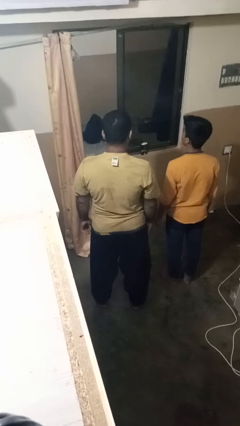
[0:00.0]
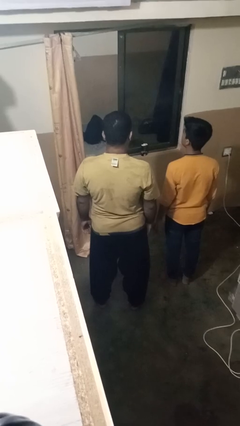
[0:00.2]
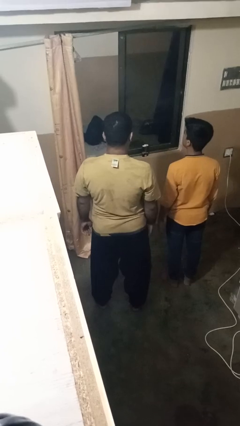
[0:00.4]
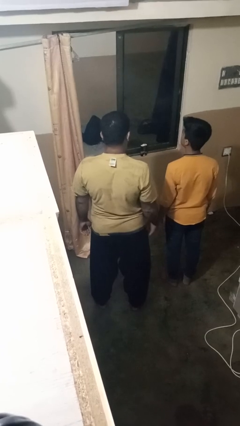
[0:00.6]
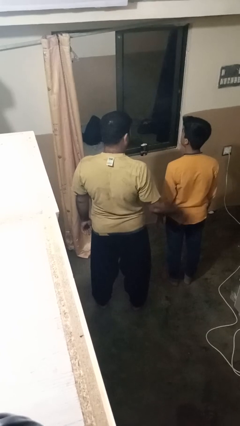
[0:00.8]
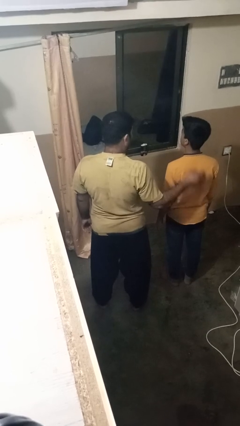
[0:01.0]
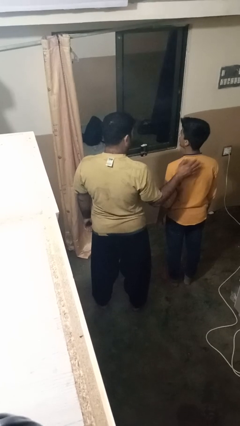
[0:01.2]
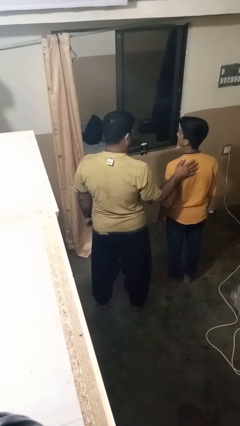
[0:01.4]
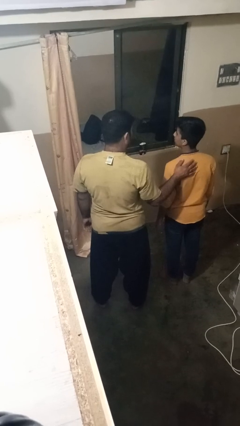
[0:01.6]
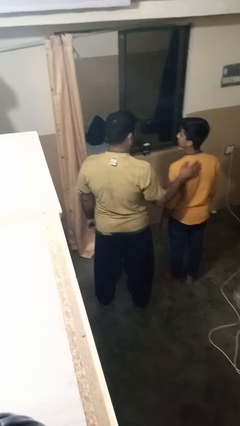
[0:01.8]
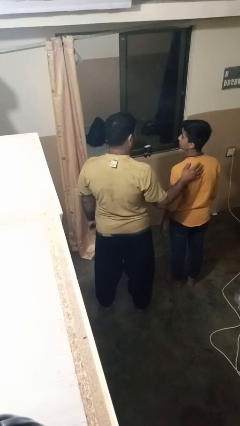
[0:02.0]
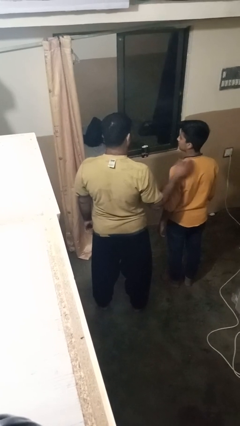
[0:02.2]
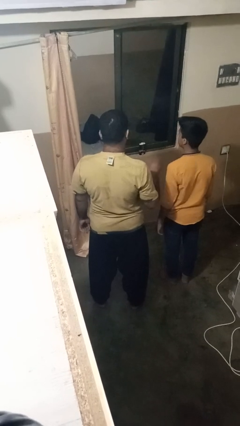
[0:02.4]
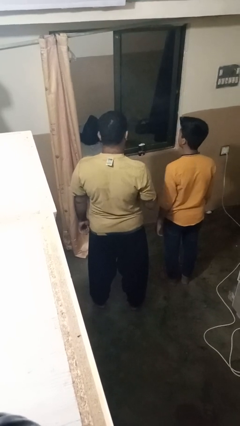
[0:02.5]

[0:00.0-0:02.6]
person touches back of person

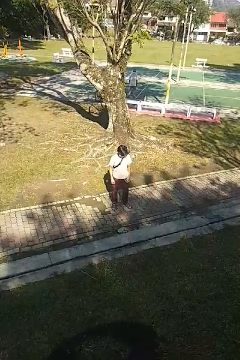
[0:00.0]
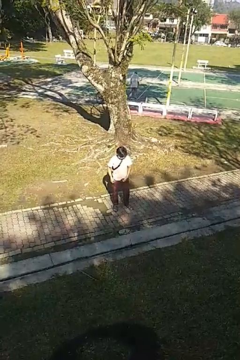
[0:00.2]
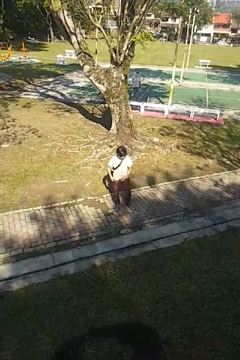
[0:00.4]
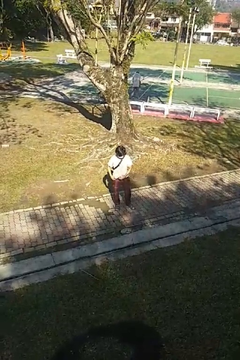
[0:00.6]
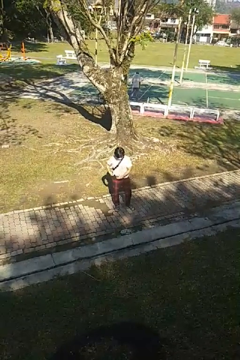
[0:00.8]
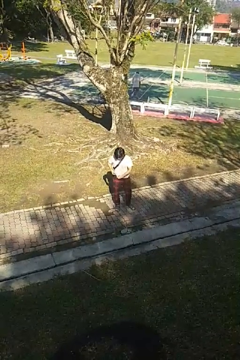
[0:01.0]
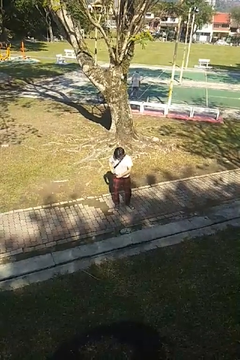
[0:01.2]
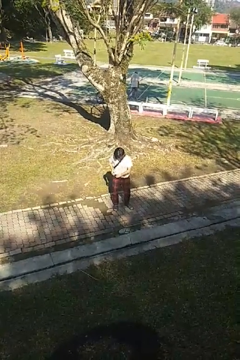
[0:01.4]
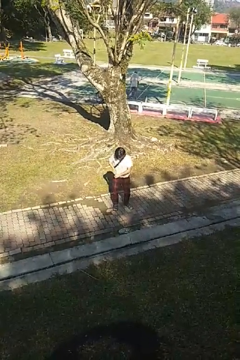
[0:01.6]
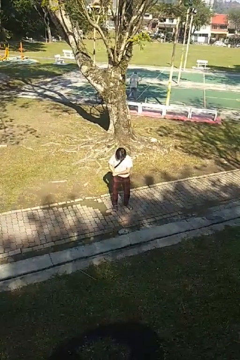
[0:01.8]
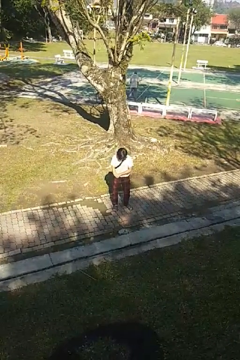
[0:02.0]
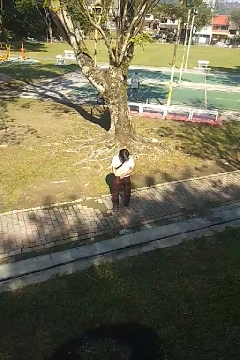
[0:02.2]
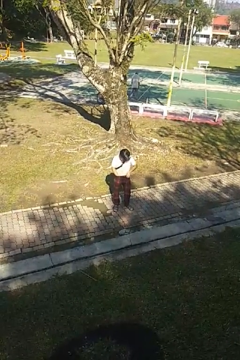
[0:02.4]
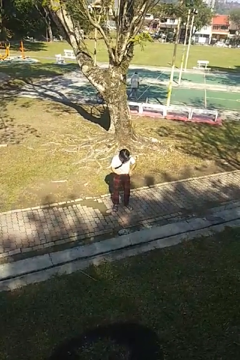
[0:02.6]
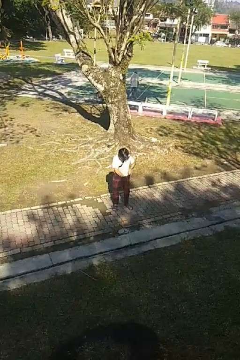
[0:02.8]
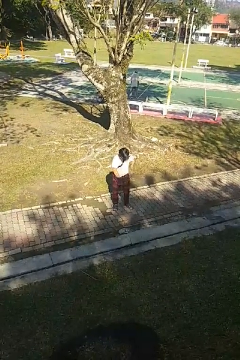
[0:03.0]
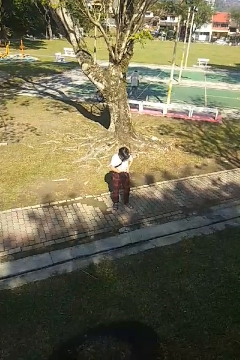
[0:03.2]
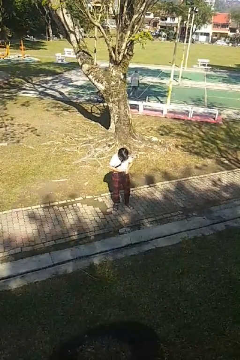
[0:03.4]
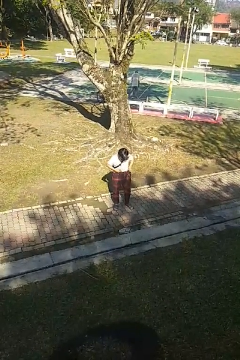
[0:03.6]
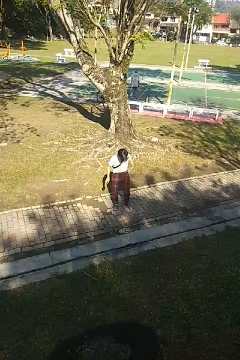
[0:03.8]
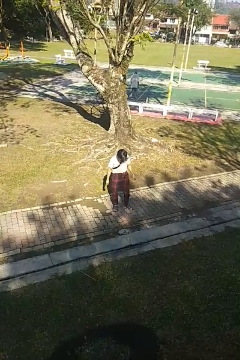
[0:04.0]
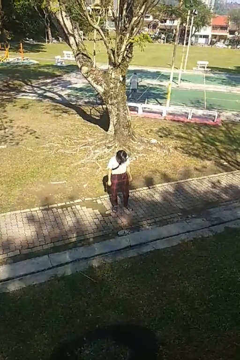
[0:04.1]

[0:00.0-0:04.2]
person tucks in shirt

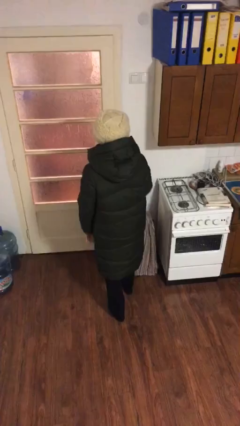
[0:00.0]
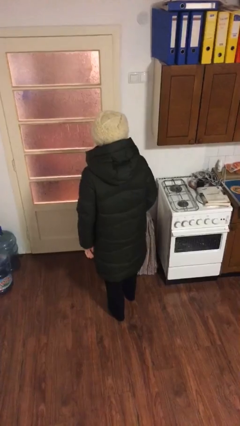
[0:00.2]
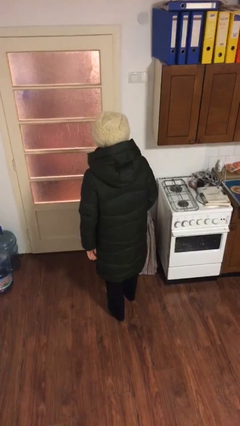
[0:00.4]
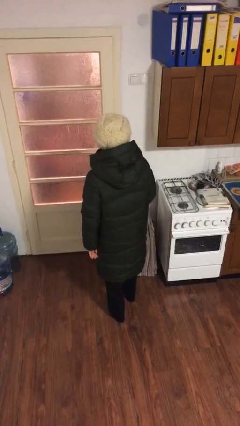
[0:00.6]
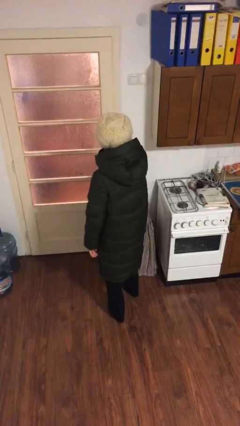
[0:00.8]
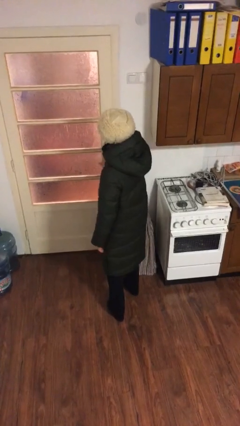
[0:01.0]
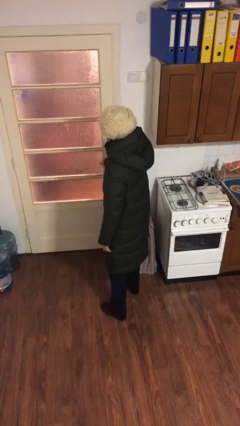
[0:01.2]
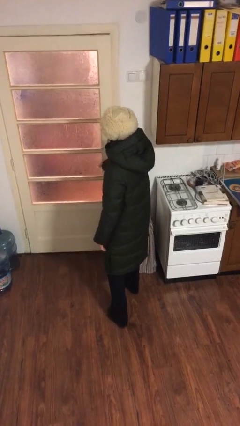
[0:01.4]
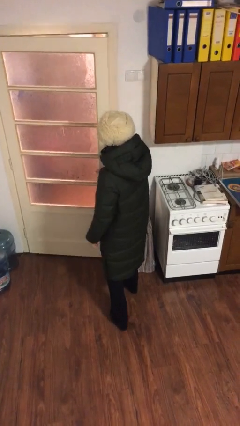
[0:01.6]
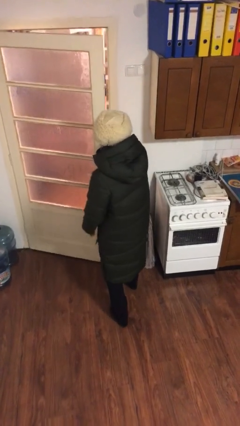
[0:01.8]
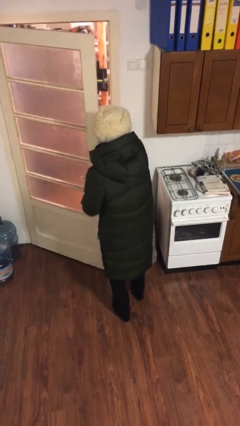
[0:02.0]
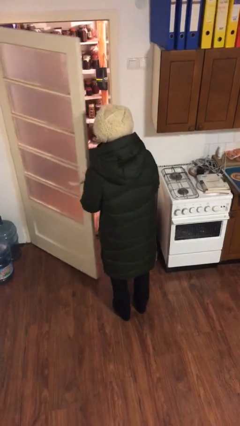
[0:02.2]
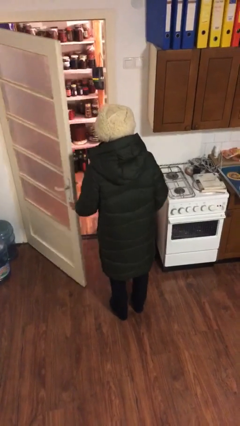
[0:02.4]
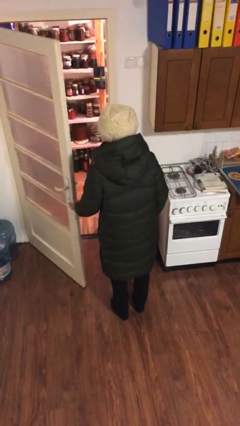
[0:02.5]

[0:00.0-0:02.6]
person opens facility door

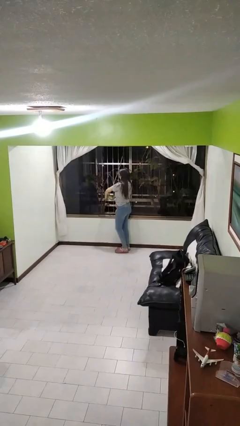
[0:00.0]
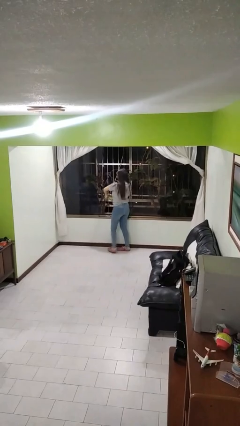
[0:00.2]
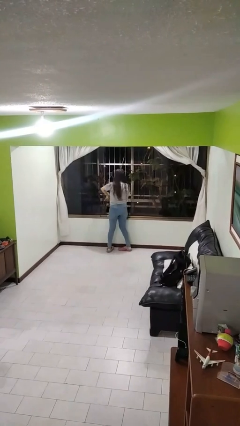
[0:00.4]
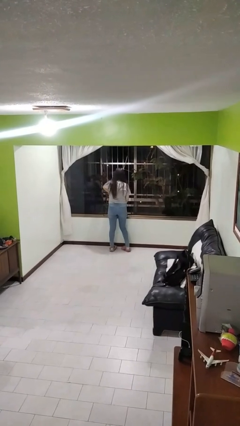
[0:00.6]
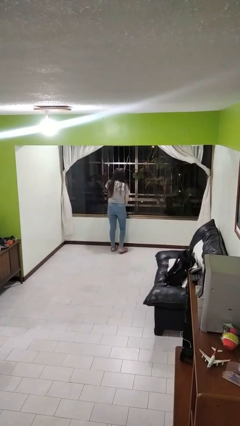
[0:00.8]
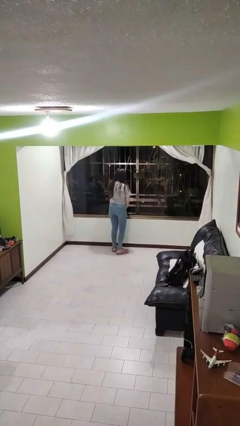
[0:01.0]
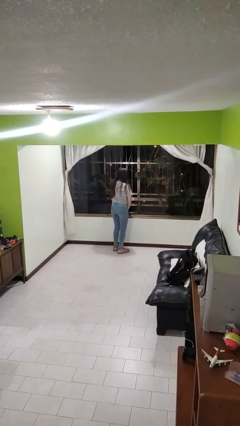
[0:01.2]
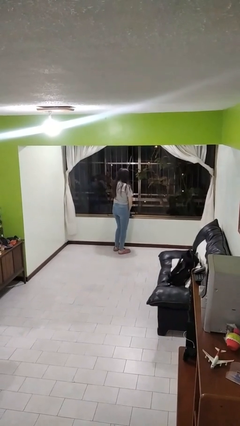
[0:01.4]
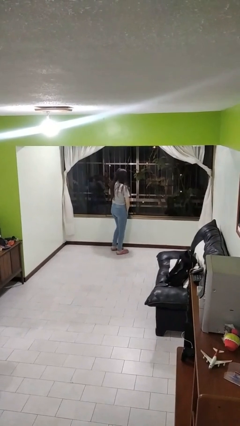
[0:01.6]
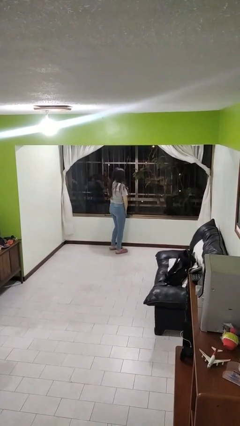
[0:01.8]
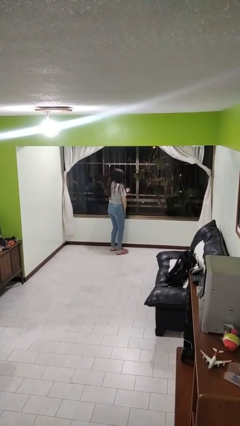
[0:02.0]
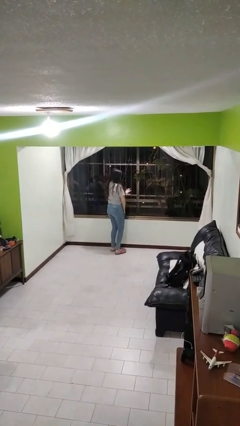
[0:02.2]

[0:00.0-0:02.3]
person closes home window

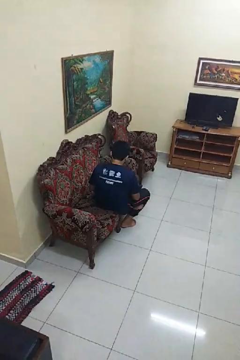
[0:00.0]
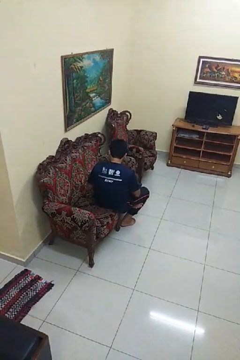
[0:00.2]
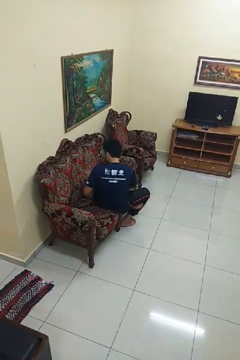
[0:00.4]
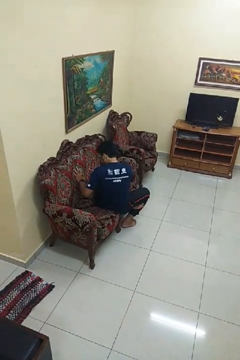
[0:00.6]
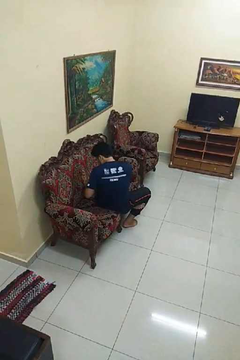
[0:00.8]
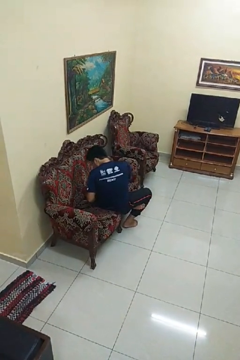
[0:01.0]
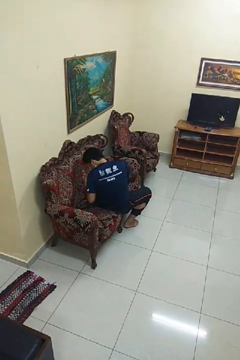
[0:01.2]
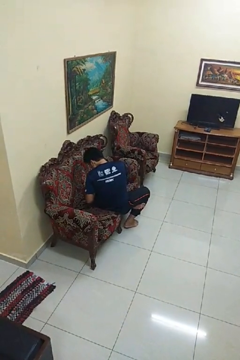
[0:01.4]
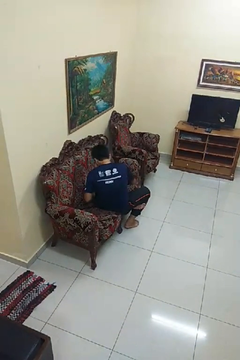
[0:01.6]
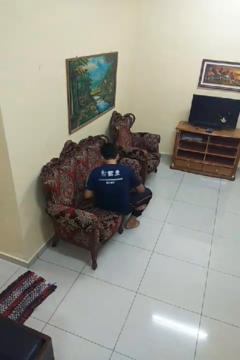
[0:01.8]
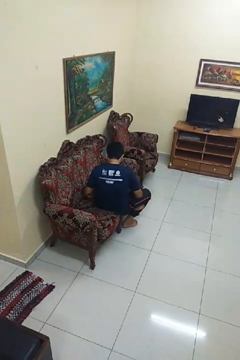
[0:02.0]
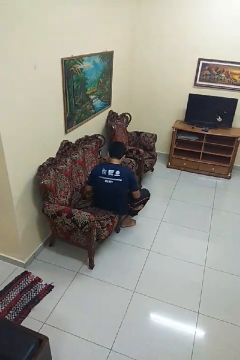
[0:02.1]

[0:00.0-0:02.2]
person searches in couch

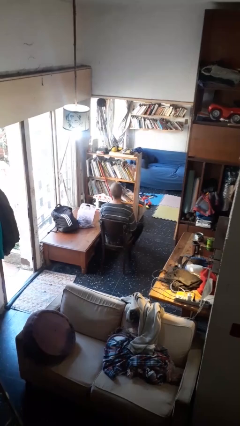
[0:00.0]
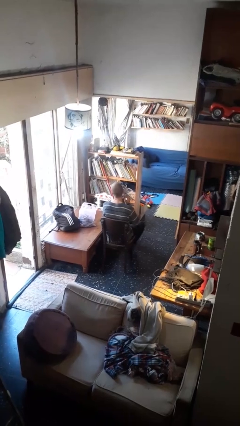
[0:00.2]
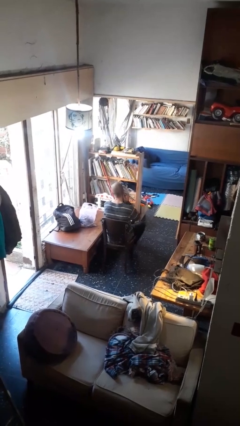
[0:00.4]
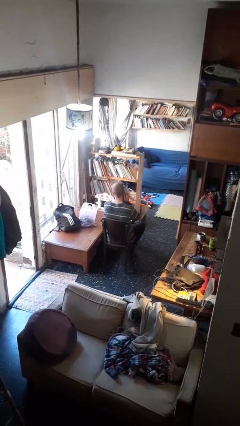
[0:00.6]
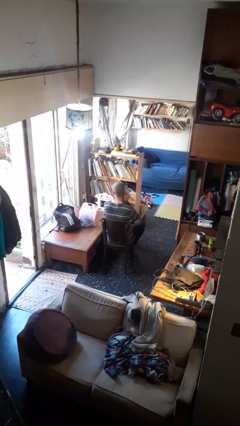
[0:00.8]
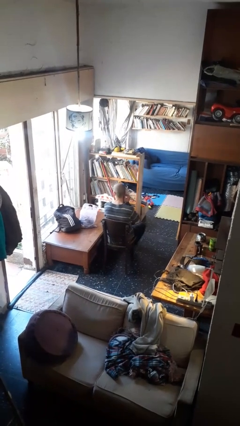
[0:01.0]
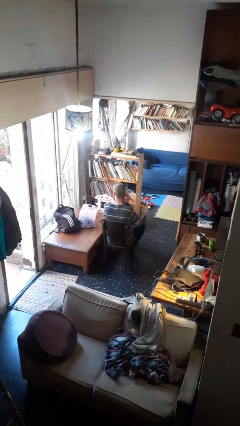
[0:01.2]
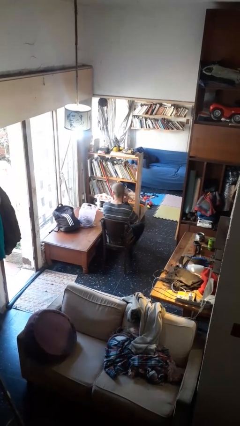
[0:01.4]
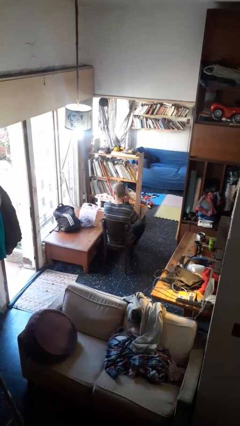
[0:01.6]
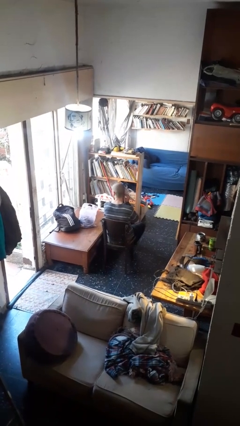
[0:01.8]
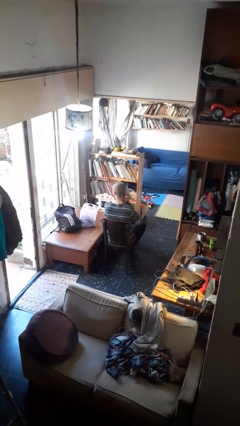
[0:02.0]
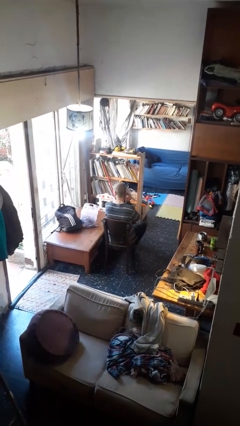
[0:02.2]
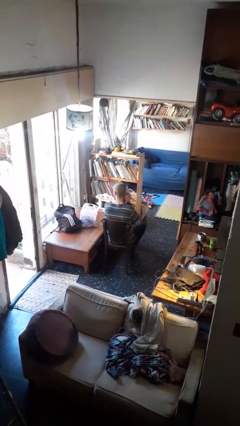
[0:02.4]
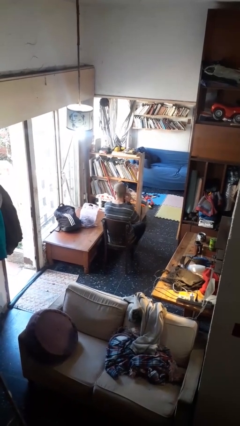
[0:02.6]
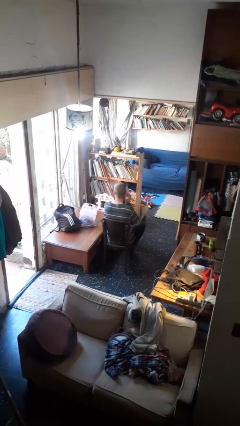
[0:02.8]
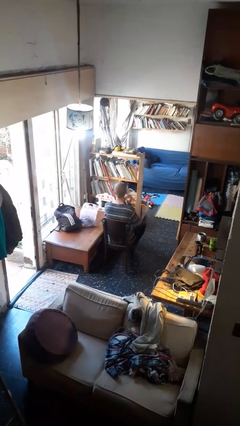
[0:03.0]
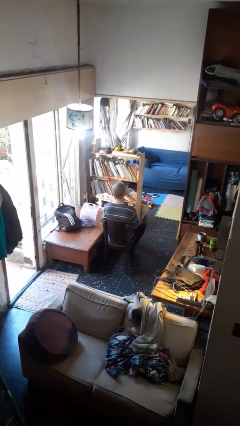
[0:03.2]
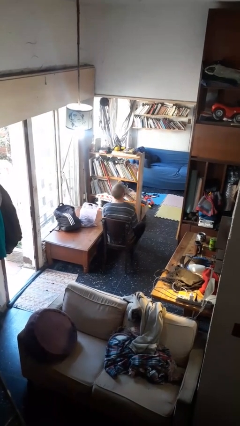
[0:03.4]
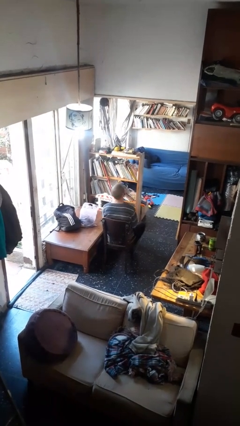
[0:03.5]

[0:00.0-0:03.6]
person puts on earrings

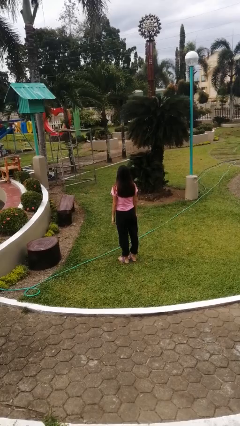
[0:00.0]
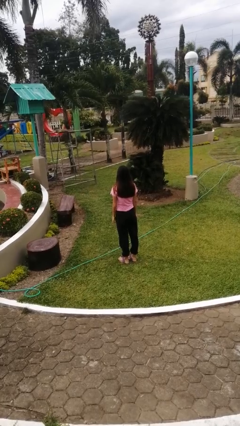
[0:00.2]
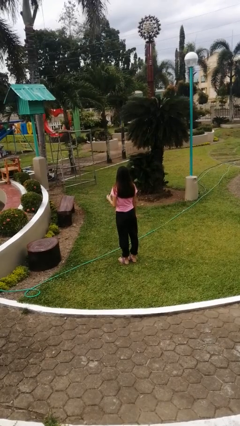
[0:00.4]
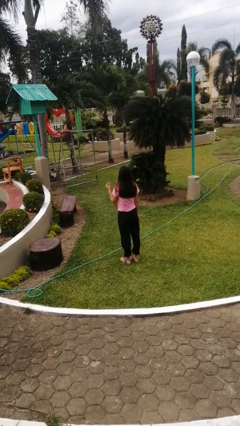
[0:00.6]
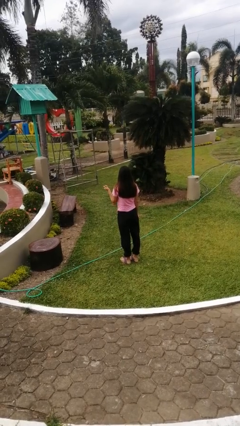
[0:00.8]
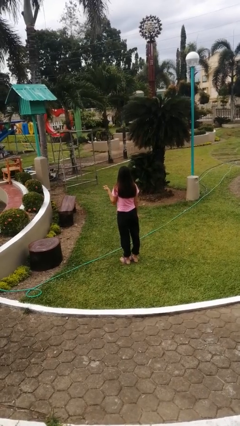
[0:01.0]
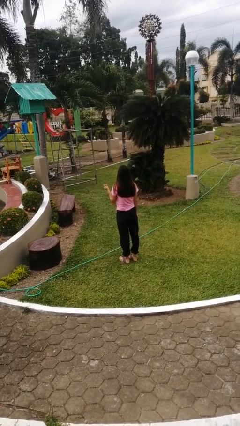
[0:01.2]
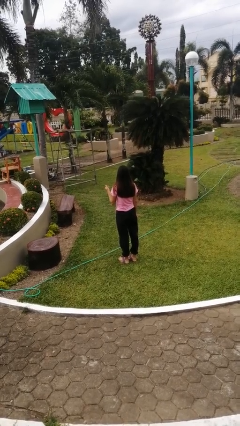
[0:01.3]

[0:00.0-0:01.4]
person snaps fingers
